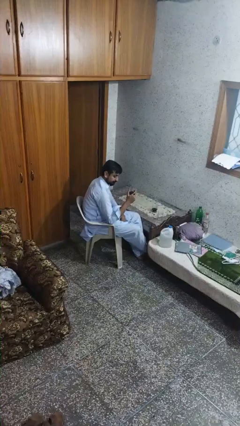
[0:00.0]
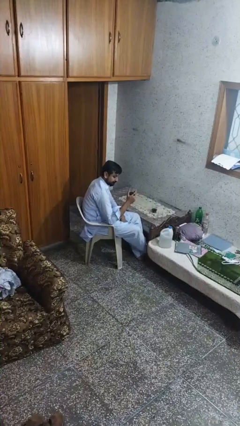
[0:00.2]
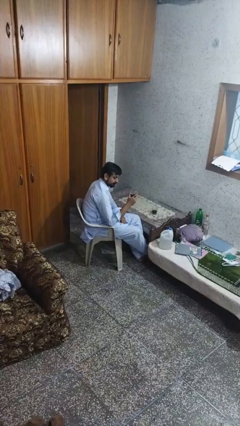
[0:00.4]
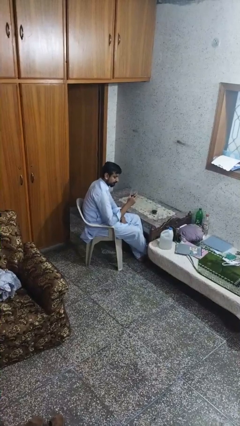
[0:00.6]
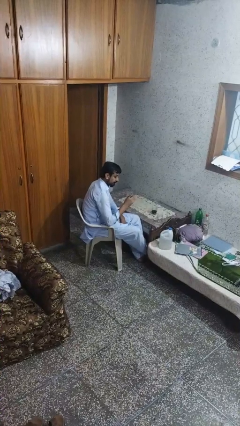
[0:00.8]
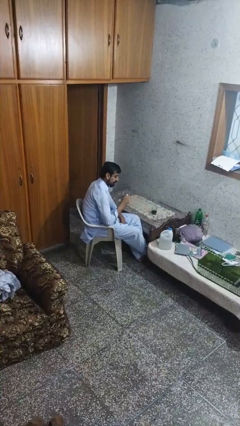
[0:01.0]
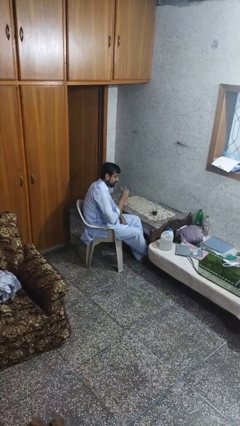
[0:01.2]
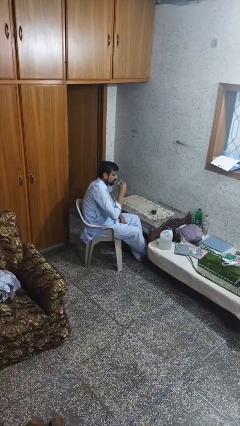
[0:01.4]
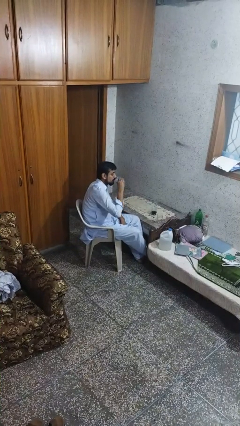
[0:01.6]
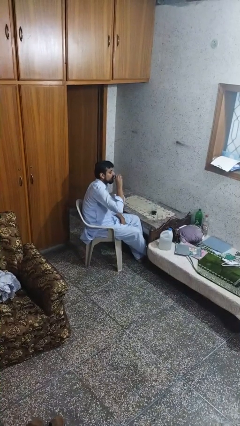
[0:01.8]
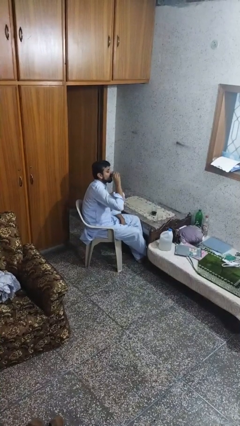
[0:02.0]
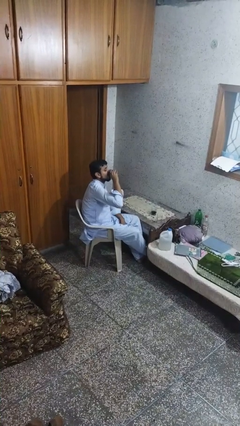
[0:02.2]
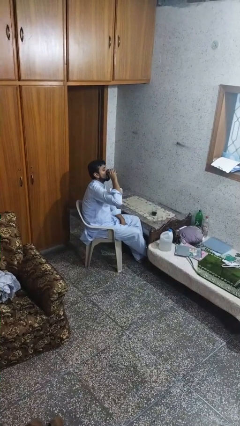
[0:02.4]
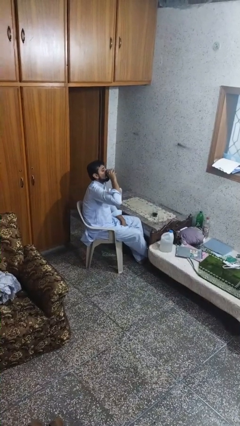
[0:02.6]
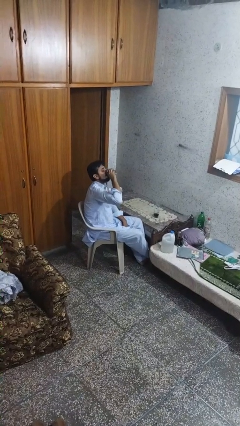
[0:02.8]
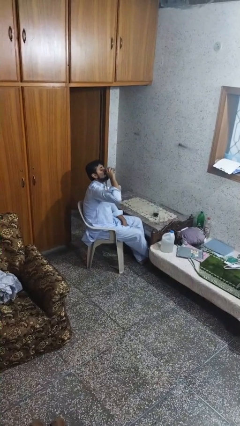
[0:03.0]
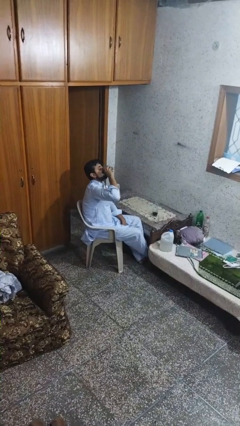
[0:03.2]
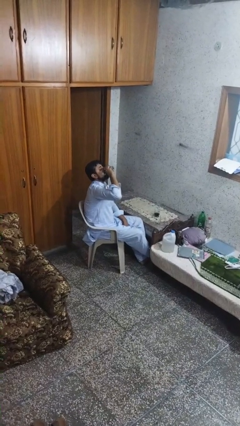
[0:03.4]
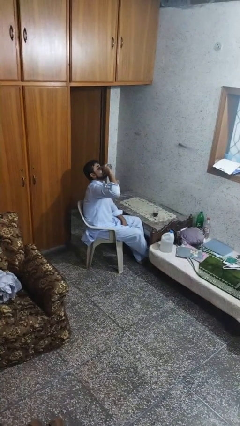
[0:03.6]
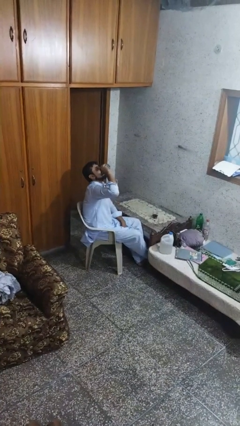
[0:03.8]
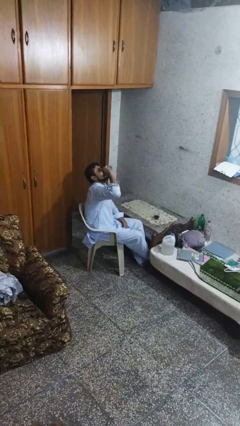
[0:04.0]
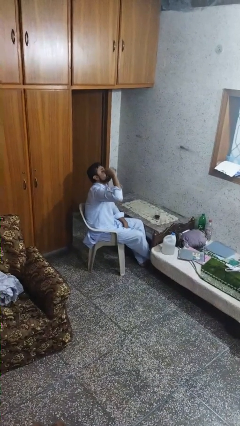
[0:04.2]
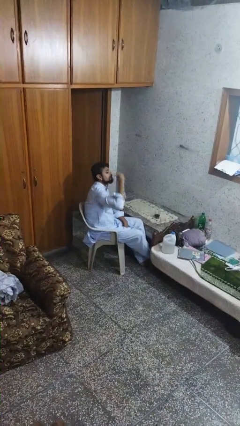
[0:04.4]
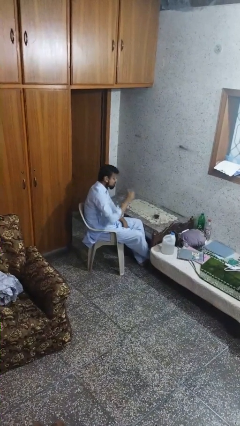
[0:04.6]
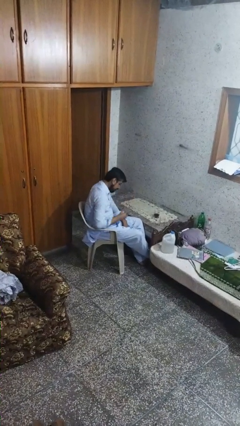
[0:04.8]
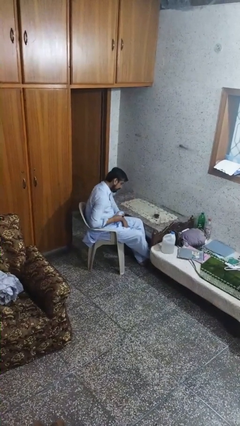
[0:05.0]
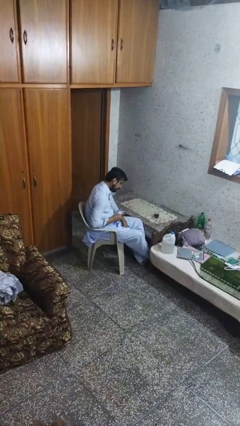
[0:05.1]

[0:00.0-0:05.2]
person drinks from shotglass

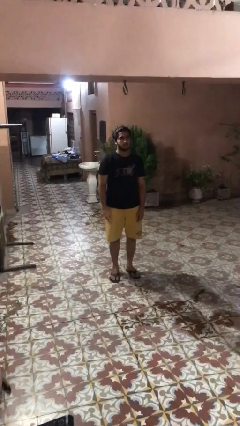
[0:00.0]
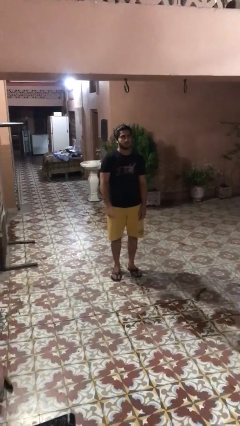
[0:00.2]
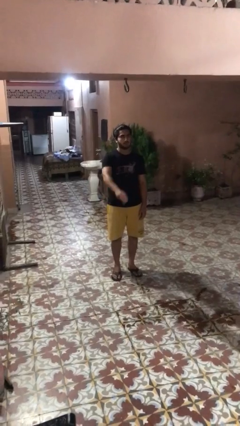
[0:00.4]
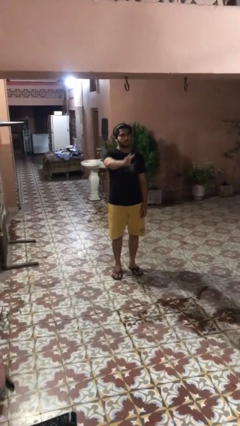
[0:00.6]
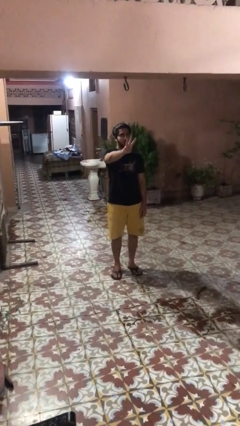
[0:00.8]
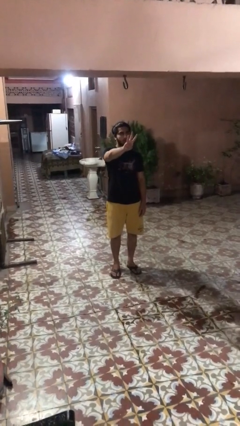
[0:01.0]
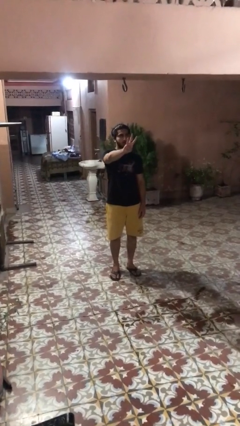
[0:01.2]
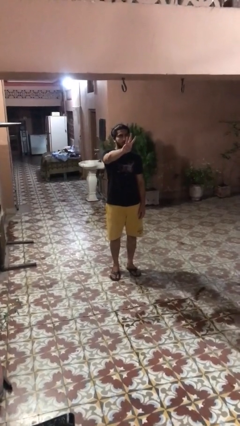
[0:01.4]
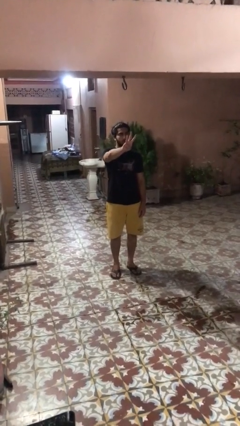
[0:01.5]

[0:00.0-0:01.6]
person gestures number three

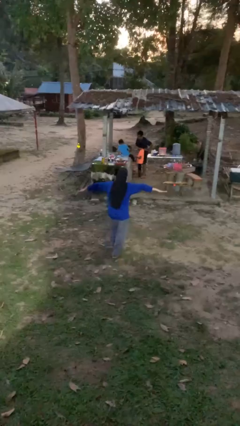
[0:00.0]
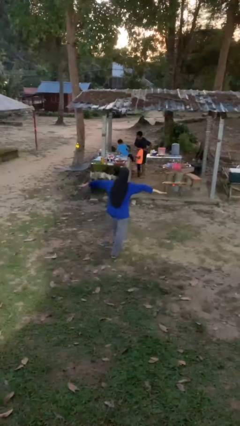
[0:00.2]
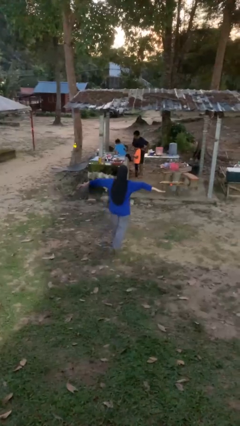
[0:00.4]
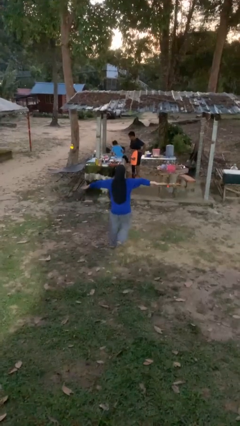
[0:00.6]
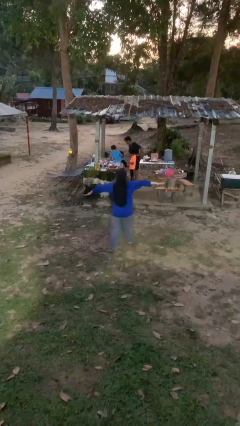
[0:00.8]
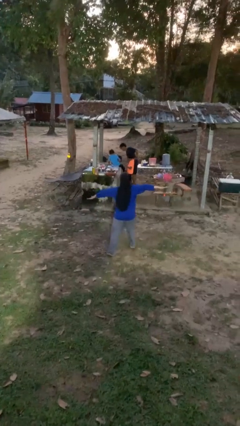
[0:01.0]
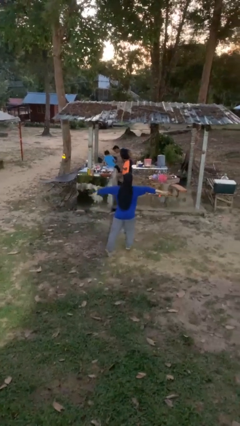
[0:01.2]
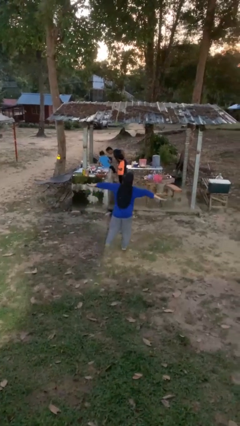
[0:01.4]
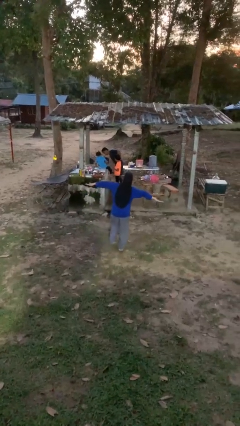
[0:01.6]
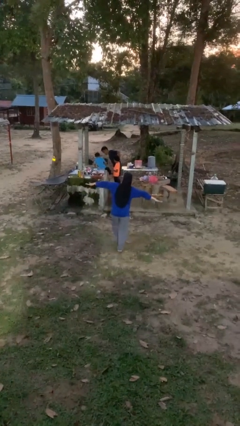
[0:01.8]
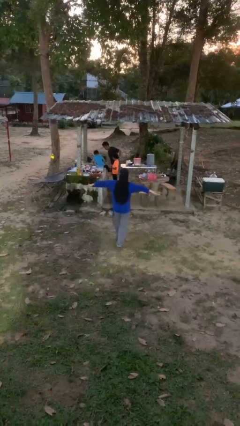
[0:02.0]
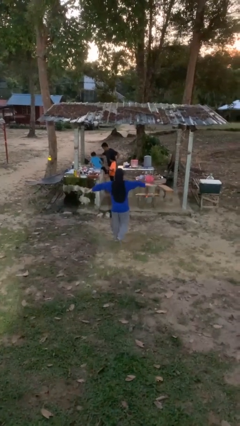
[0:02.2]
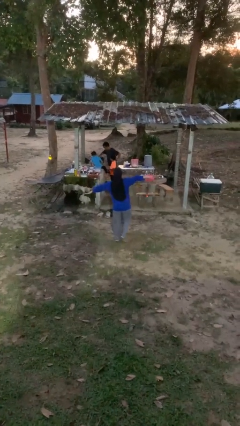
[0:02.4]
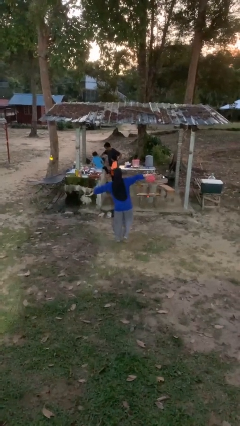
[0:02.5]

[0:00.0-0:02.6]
person walks tiptoe

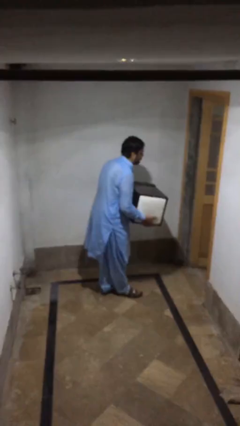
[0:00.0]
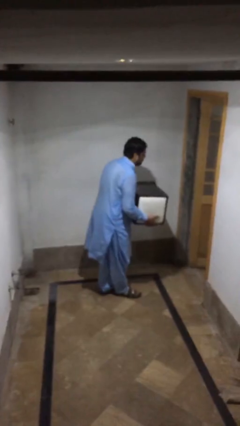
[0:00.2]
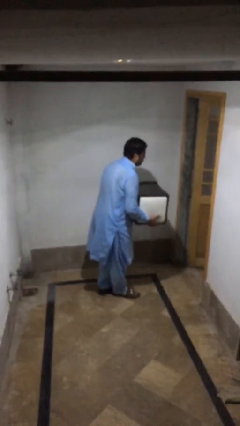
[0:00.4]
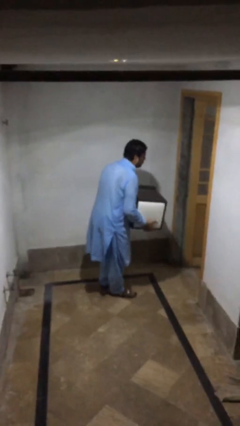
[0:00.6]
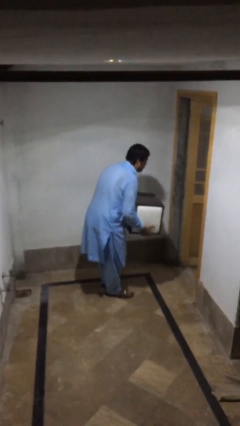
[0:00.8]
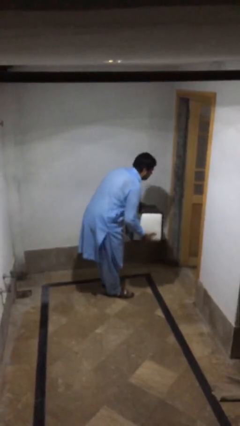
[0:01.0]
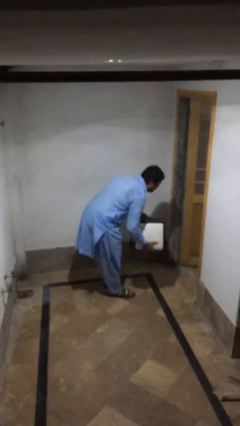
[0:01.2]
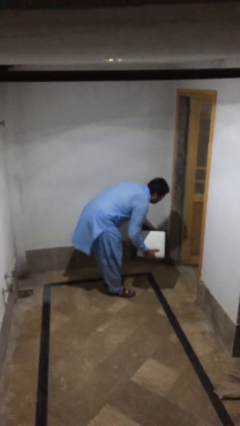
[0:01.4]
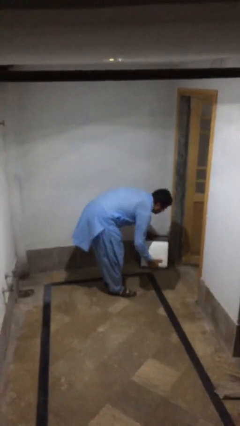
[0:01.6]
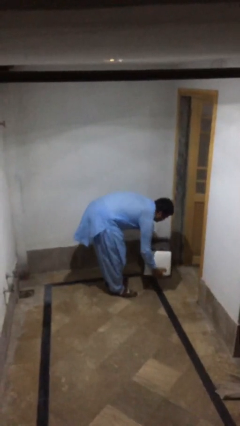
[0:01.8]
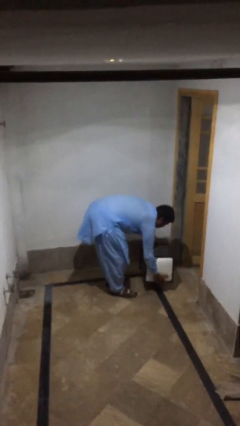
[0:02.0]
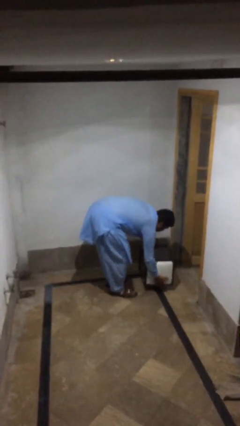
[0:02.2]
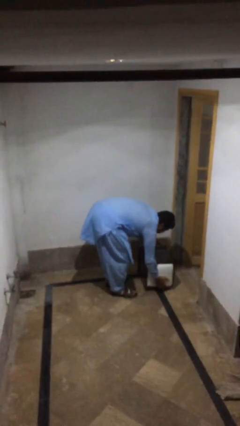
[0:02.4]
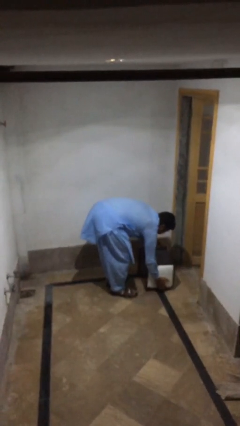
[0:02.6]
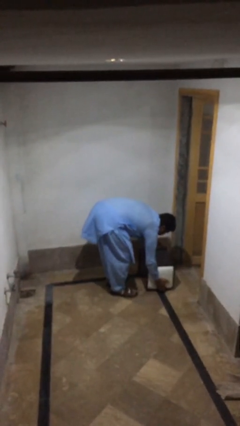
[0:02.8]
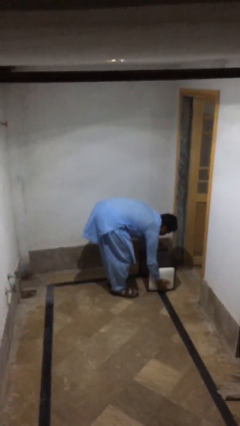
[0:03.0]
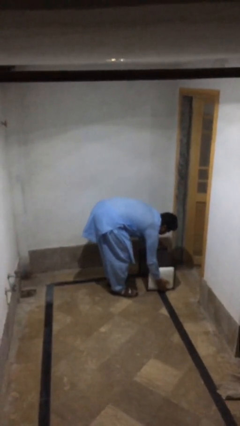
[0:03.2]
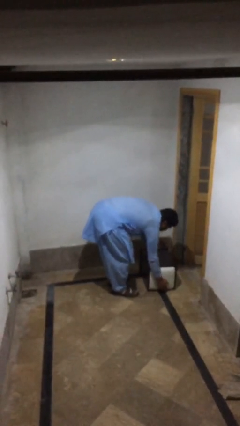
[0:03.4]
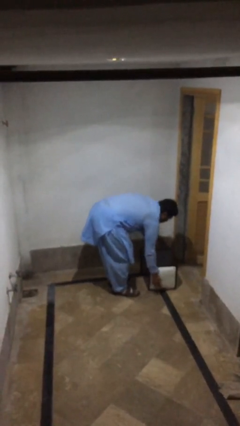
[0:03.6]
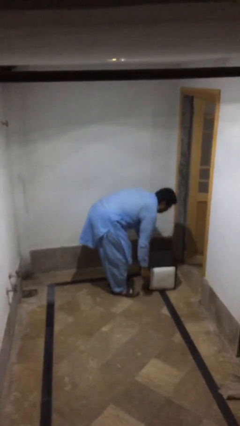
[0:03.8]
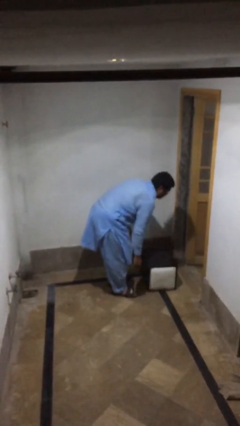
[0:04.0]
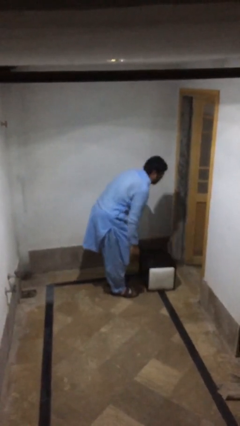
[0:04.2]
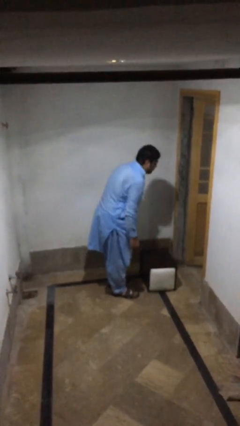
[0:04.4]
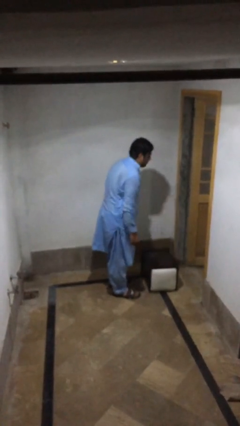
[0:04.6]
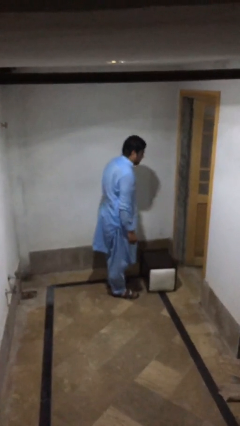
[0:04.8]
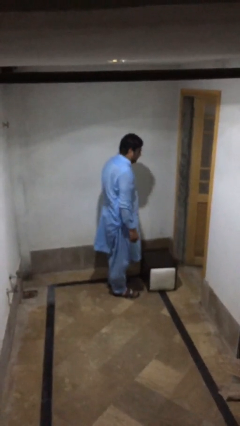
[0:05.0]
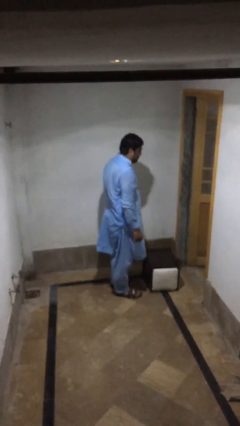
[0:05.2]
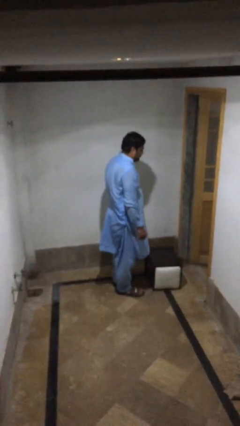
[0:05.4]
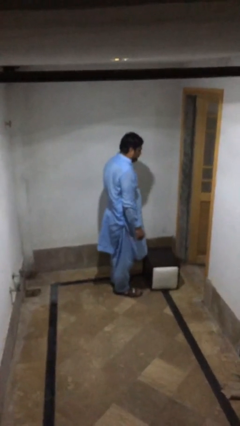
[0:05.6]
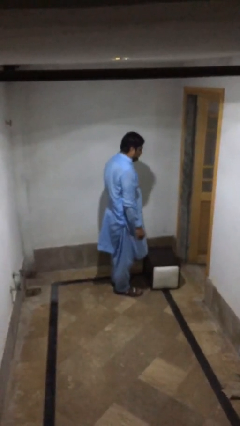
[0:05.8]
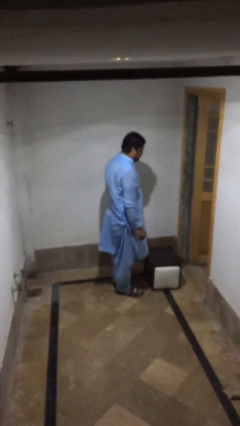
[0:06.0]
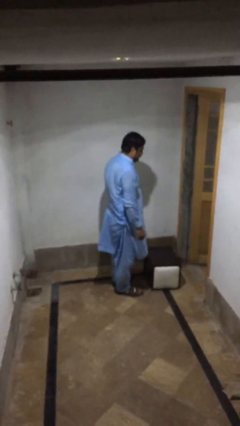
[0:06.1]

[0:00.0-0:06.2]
person puts down object on floor

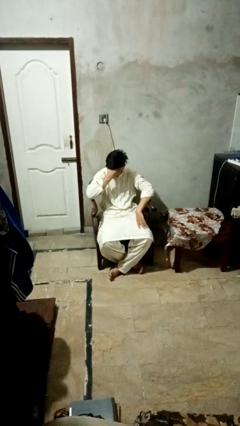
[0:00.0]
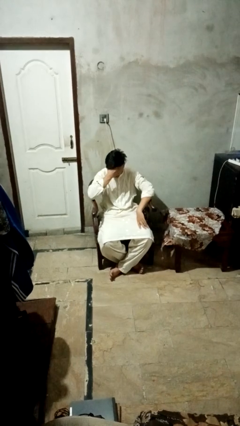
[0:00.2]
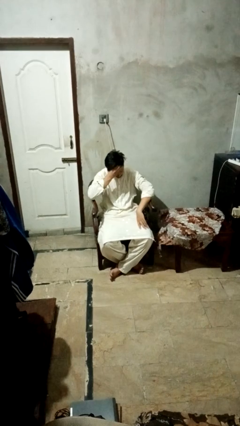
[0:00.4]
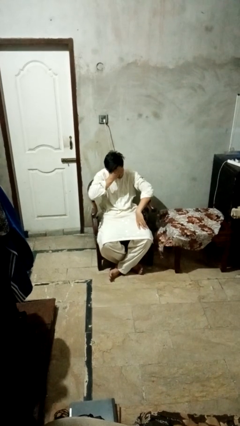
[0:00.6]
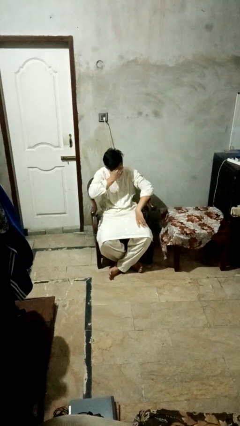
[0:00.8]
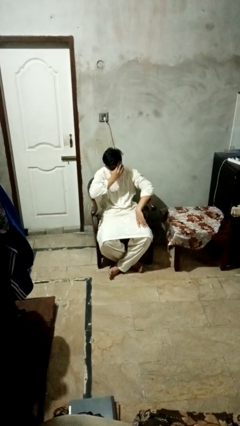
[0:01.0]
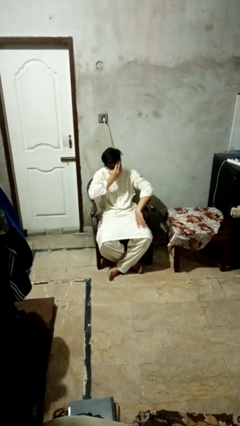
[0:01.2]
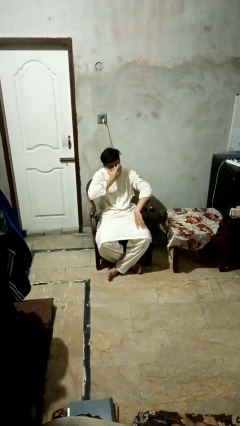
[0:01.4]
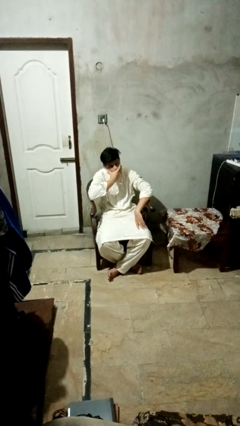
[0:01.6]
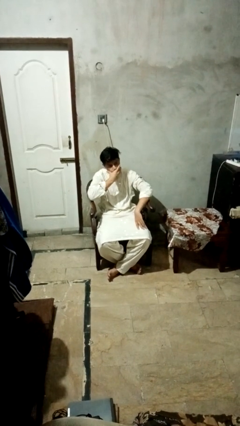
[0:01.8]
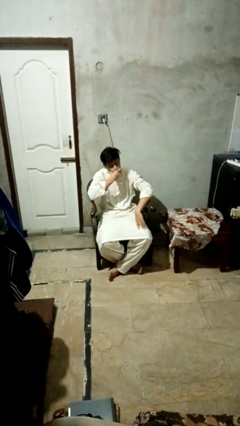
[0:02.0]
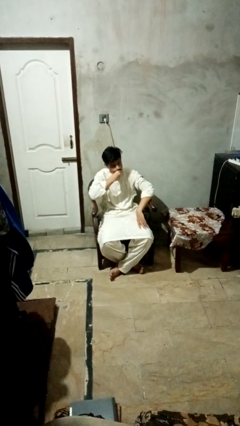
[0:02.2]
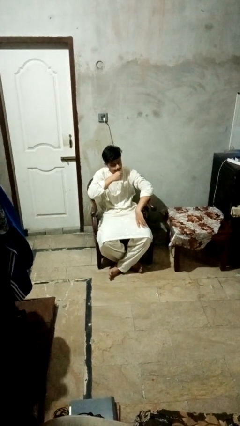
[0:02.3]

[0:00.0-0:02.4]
person covers face with hands
